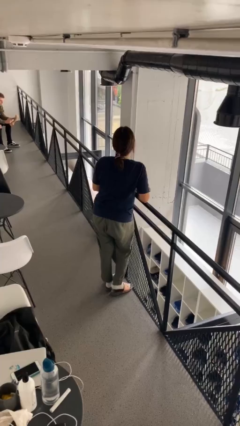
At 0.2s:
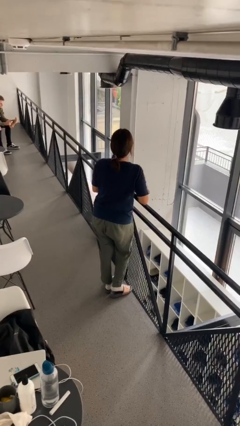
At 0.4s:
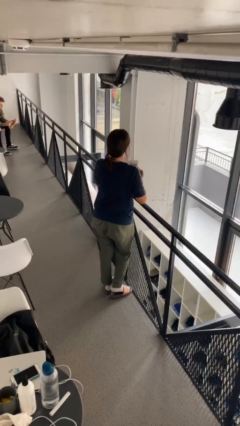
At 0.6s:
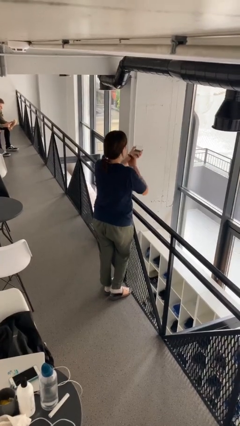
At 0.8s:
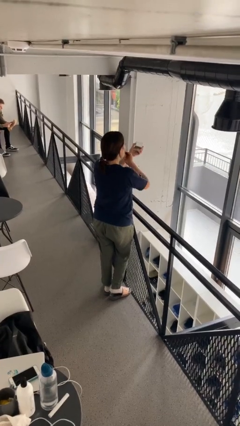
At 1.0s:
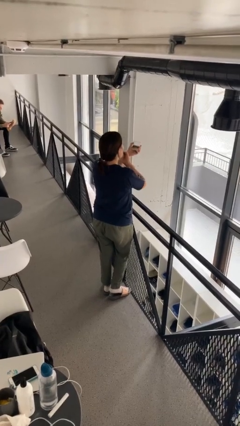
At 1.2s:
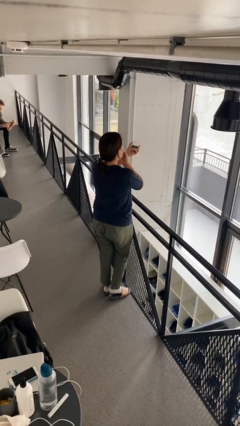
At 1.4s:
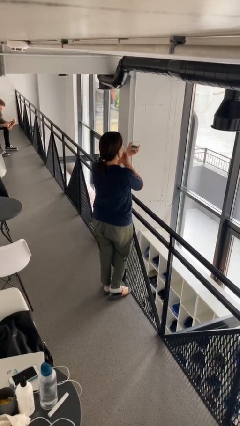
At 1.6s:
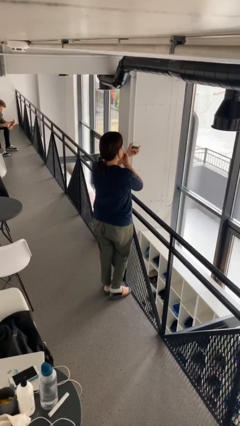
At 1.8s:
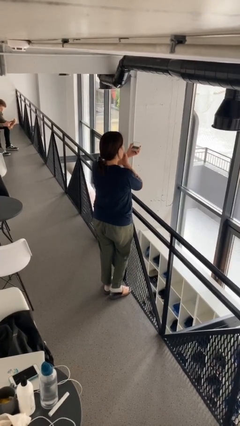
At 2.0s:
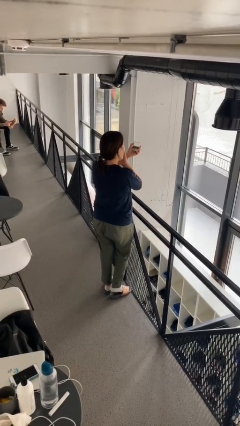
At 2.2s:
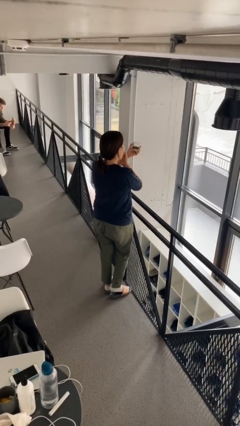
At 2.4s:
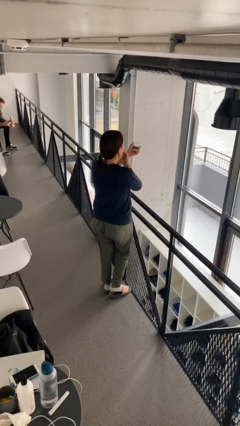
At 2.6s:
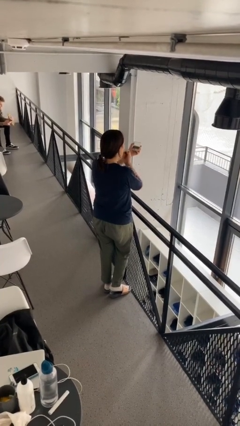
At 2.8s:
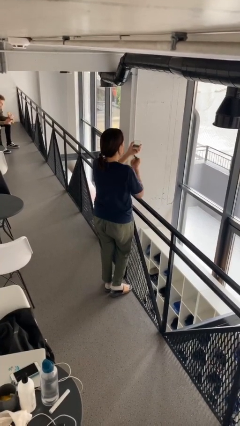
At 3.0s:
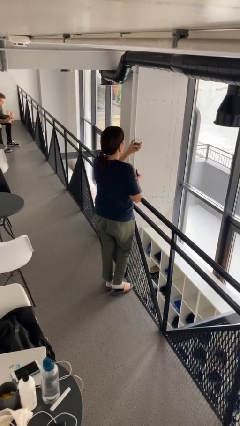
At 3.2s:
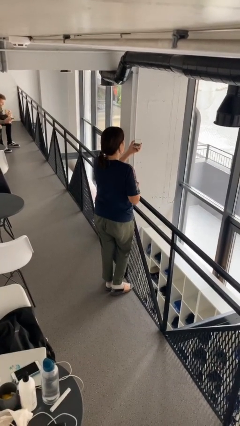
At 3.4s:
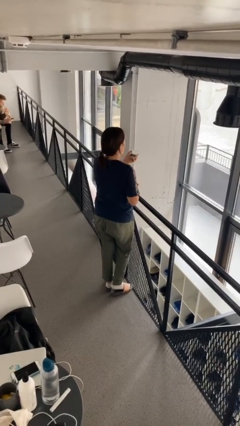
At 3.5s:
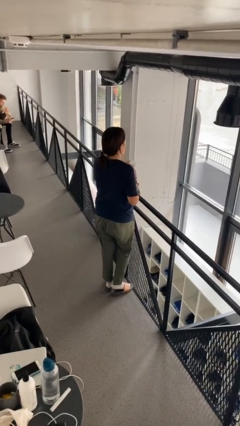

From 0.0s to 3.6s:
person applies lip makeup

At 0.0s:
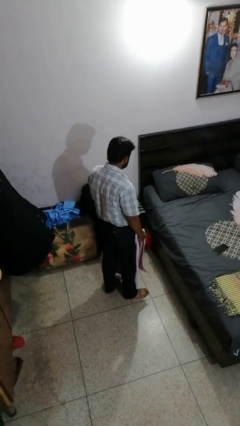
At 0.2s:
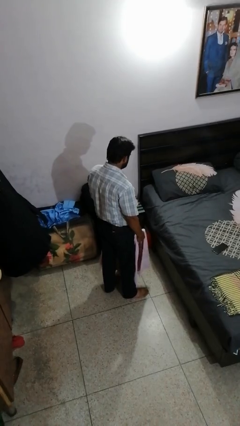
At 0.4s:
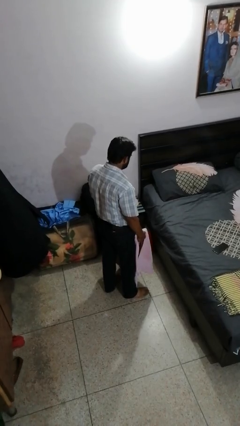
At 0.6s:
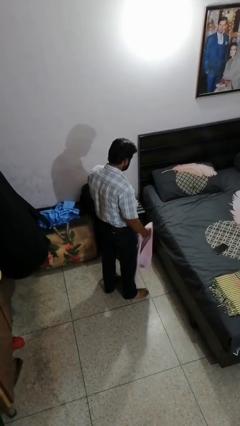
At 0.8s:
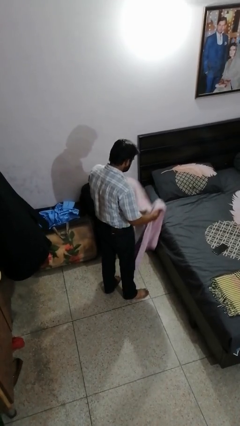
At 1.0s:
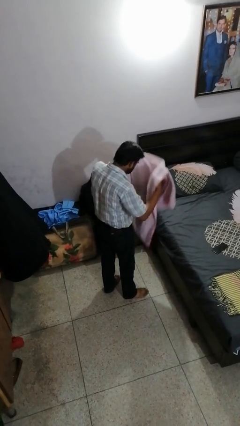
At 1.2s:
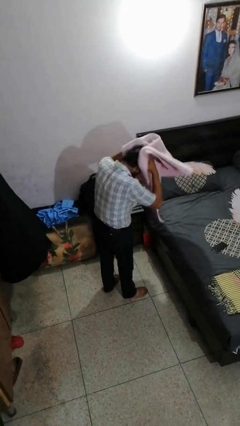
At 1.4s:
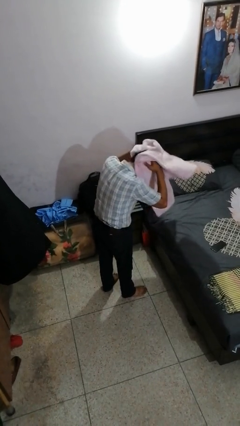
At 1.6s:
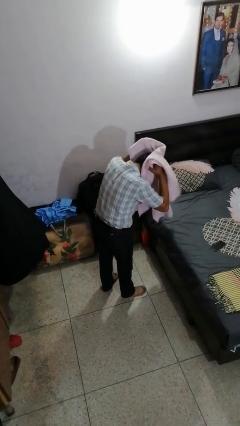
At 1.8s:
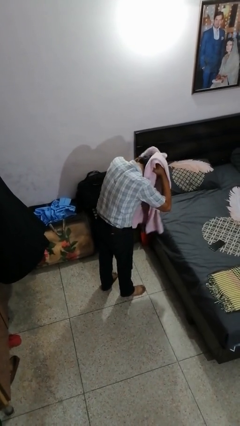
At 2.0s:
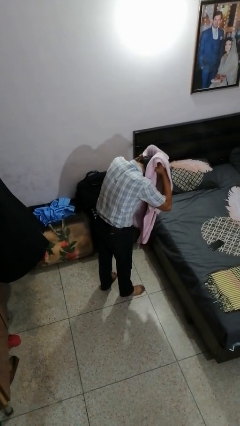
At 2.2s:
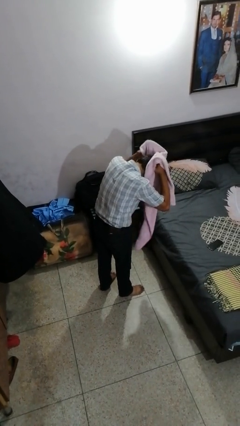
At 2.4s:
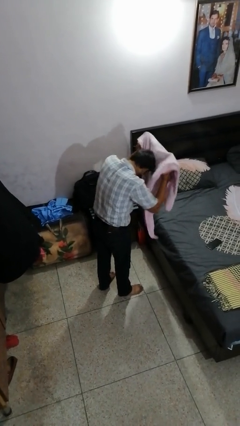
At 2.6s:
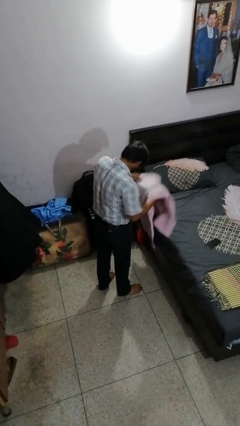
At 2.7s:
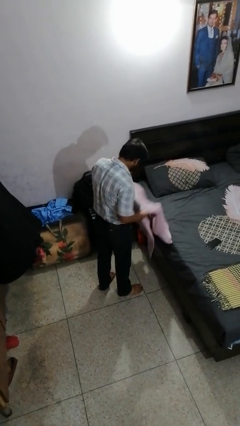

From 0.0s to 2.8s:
person dries hair with towel

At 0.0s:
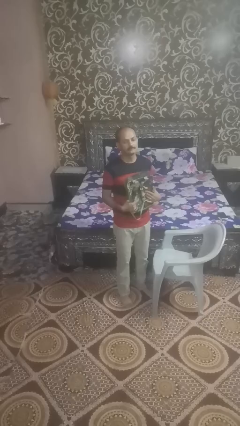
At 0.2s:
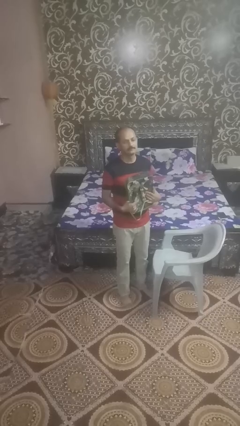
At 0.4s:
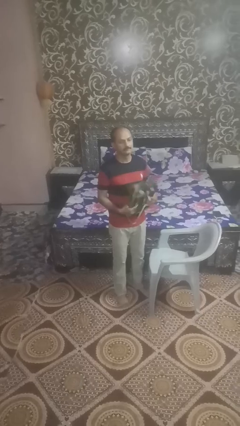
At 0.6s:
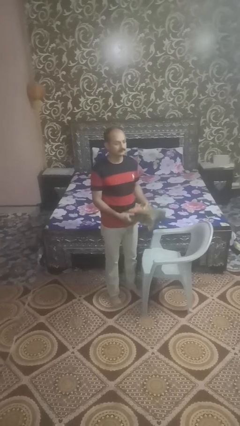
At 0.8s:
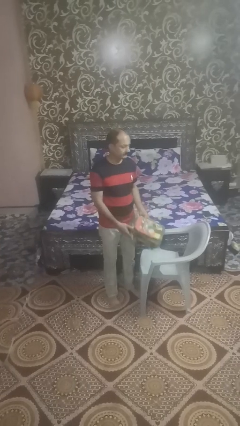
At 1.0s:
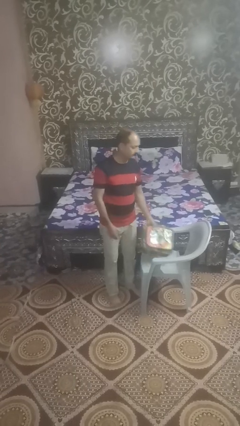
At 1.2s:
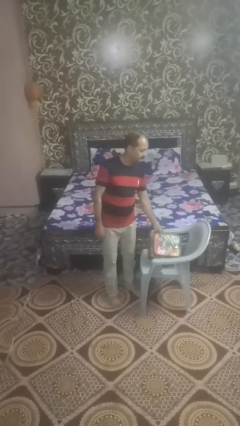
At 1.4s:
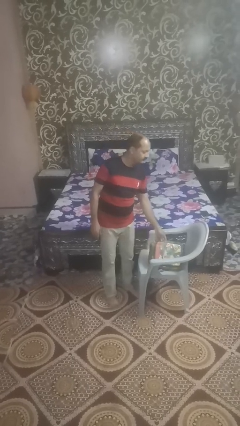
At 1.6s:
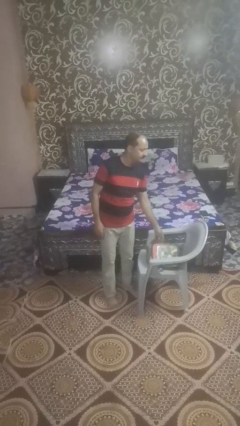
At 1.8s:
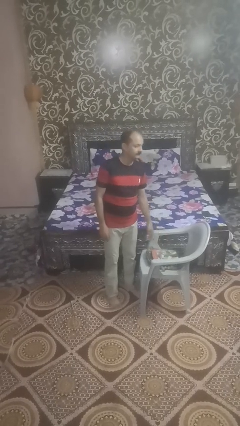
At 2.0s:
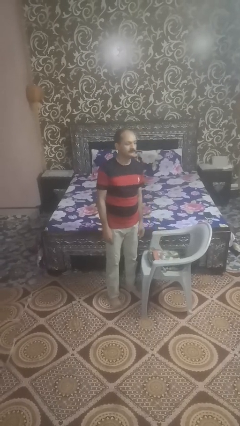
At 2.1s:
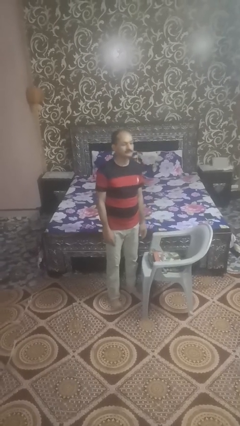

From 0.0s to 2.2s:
person puts down object on couch

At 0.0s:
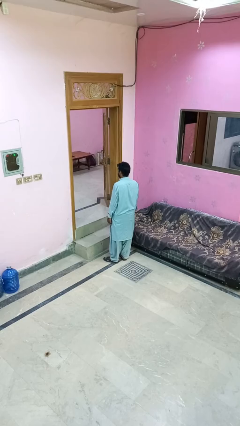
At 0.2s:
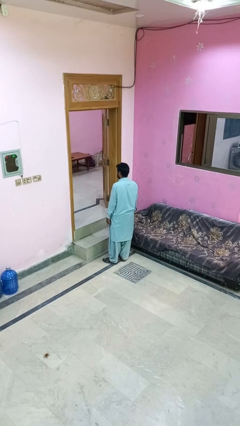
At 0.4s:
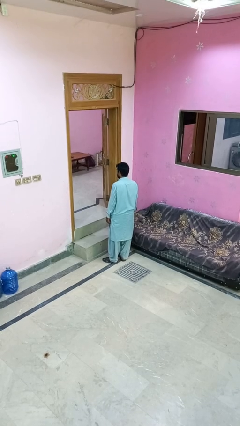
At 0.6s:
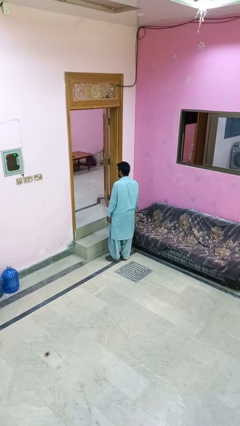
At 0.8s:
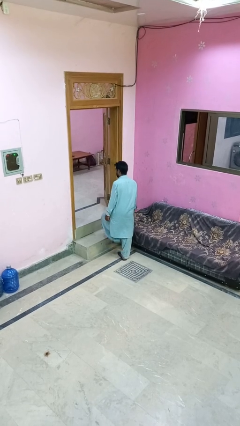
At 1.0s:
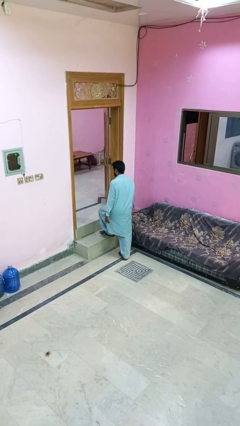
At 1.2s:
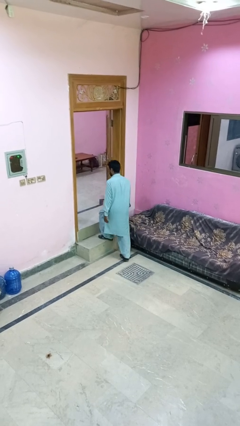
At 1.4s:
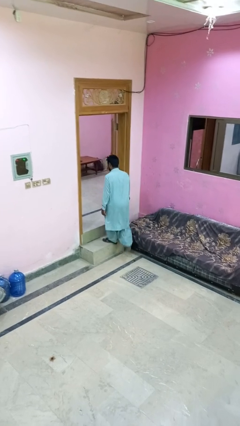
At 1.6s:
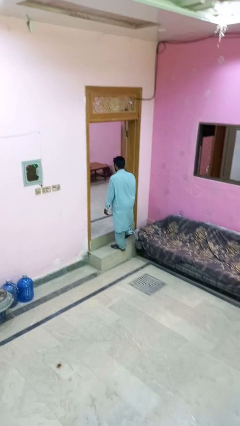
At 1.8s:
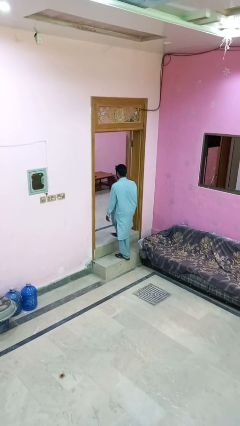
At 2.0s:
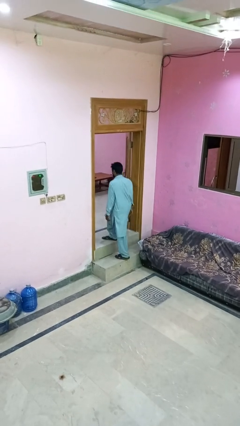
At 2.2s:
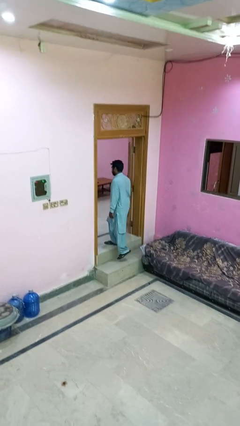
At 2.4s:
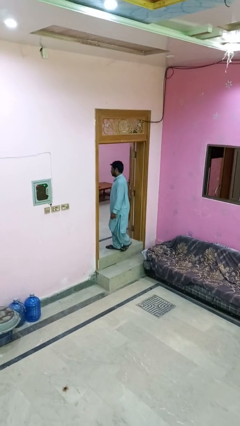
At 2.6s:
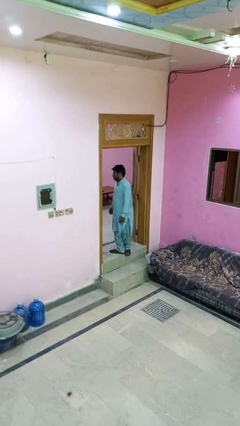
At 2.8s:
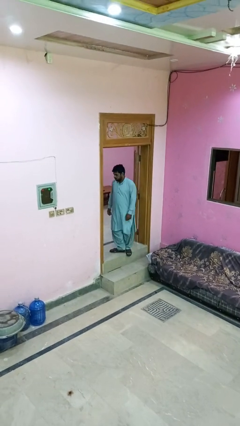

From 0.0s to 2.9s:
person climbs up stairs

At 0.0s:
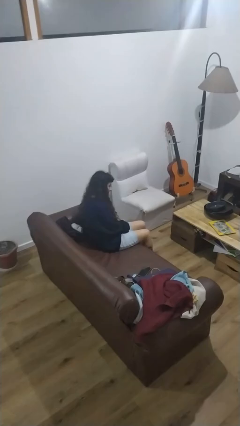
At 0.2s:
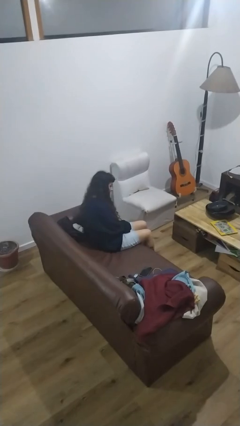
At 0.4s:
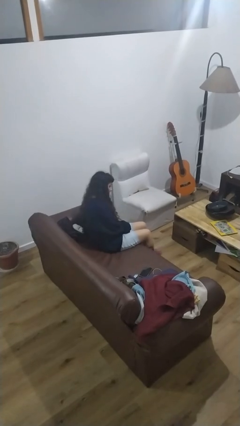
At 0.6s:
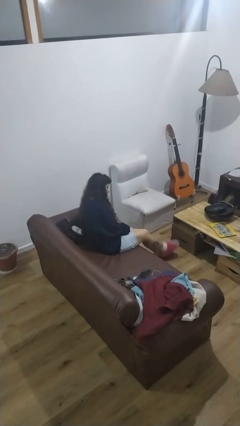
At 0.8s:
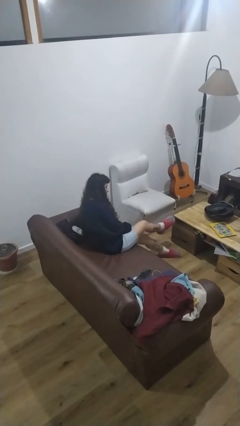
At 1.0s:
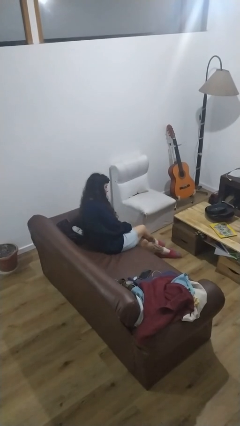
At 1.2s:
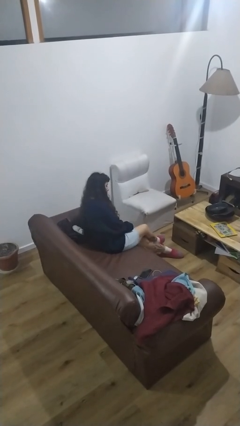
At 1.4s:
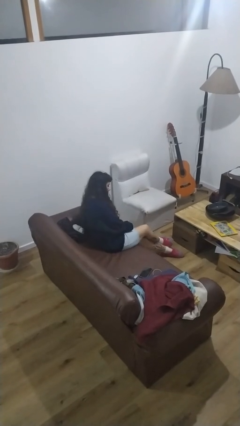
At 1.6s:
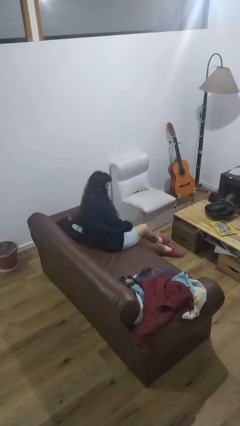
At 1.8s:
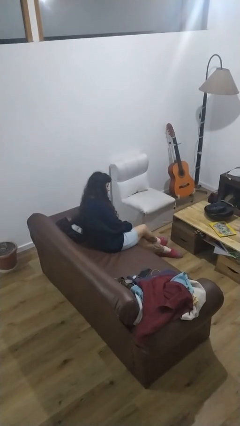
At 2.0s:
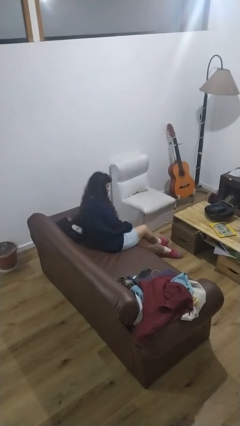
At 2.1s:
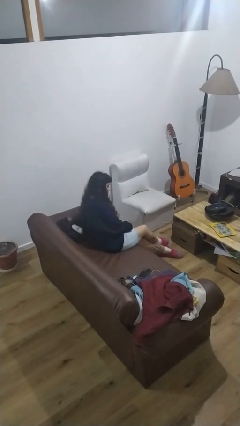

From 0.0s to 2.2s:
person crosses legs

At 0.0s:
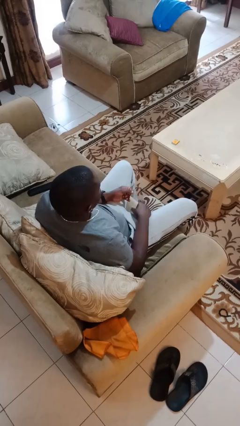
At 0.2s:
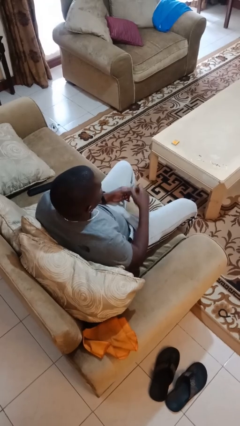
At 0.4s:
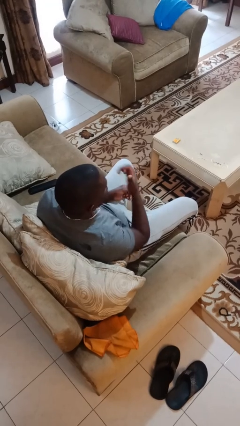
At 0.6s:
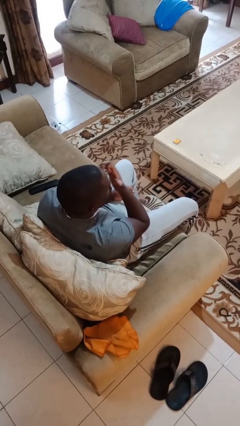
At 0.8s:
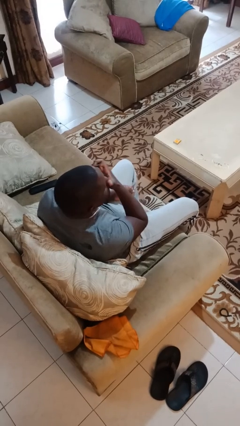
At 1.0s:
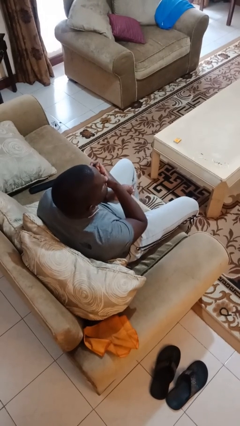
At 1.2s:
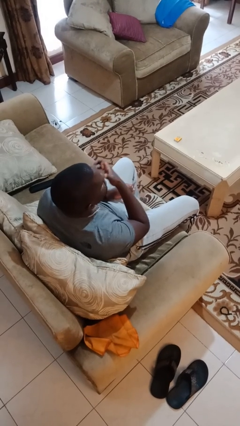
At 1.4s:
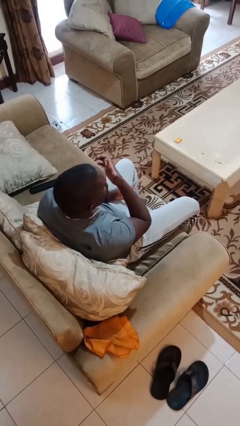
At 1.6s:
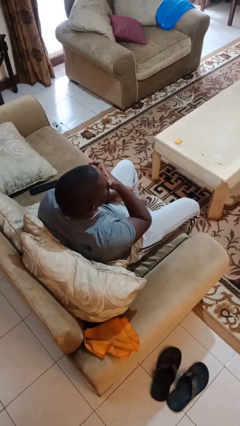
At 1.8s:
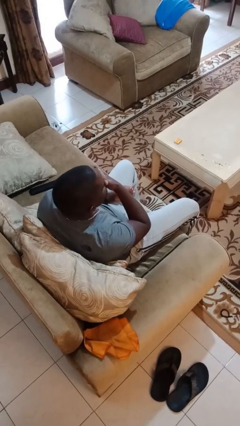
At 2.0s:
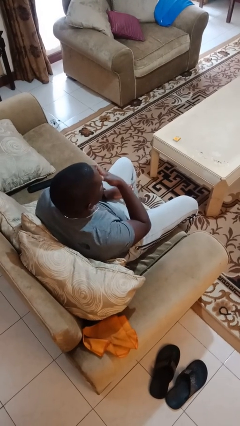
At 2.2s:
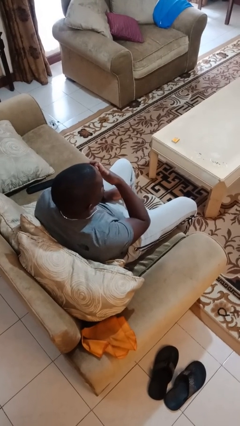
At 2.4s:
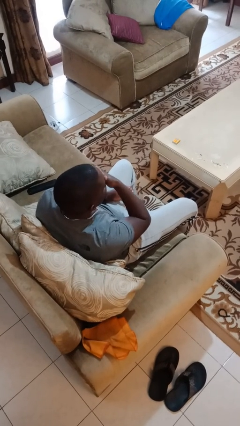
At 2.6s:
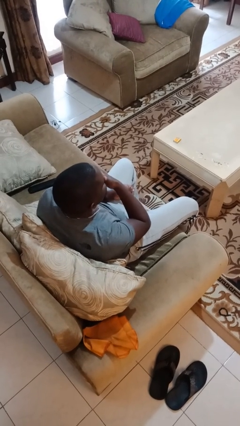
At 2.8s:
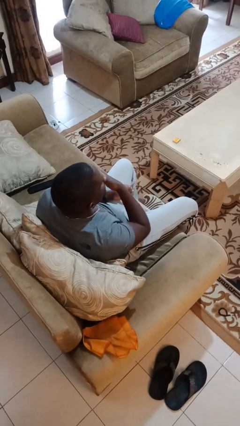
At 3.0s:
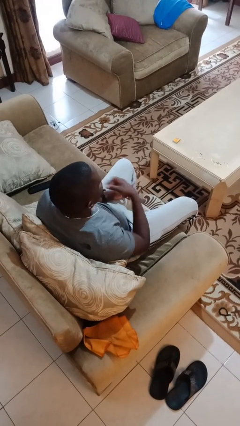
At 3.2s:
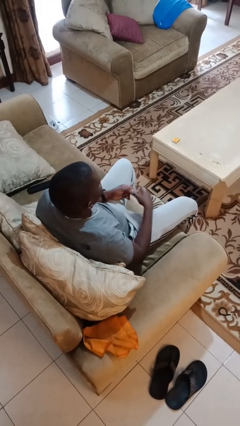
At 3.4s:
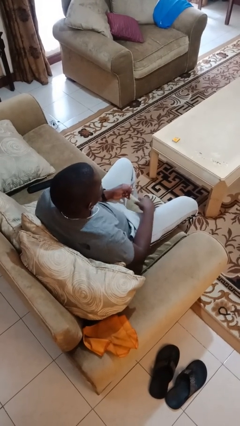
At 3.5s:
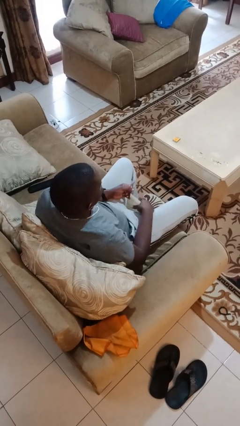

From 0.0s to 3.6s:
person licks fingers

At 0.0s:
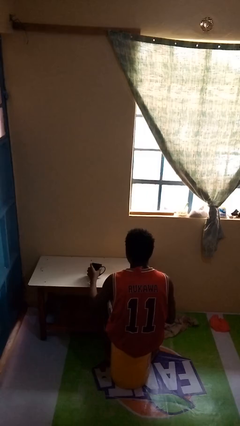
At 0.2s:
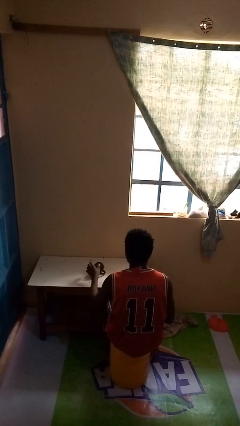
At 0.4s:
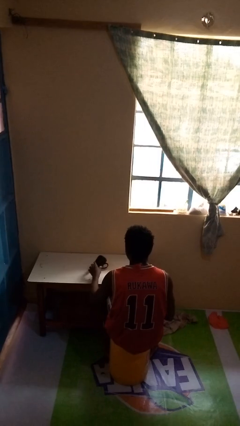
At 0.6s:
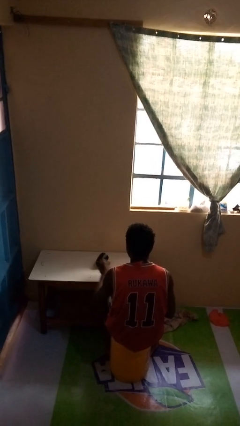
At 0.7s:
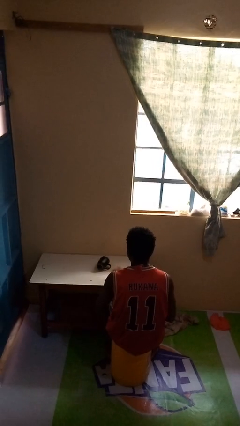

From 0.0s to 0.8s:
person knocks over glass
